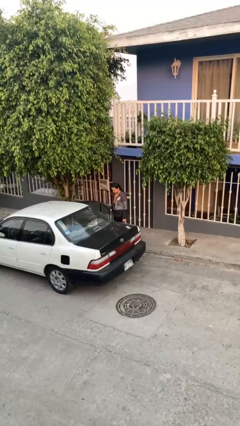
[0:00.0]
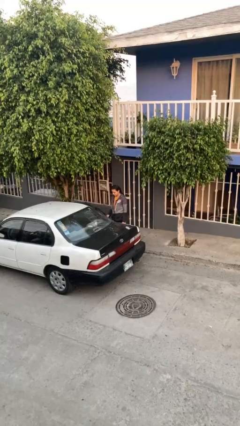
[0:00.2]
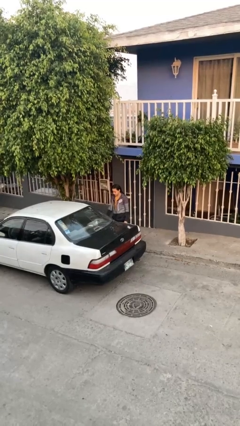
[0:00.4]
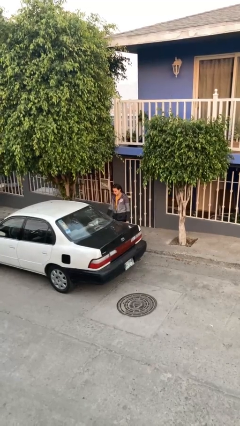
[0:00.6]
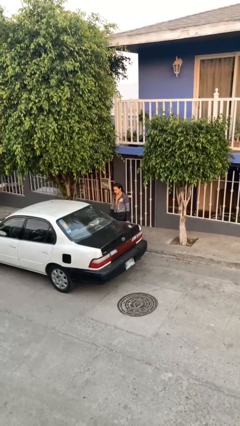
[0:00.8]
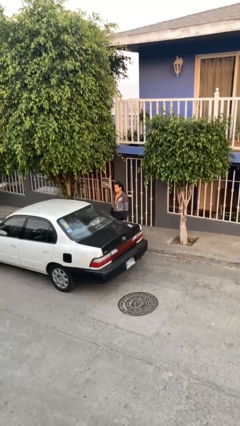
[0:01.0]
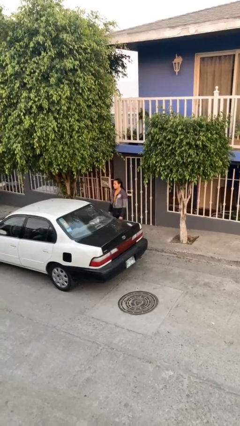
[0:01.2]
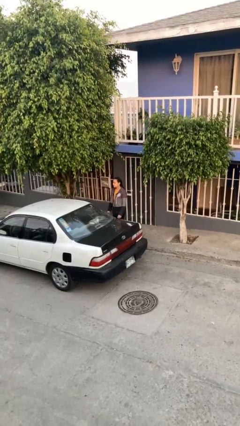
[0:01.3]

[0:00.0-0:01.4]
person closes car door

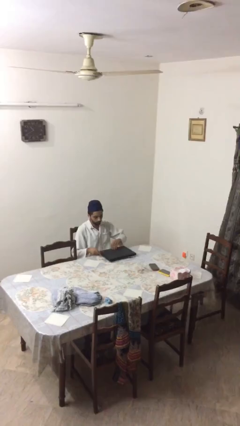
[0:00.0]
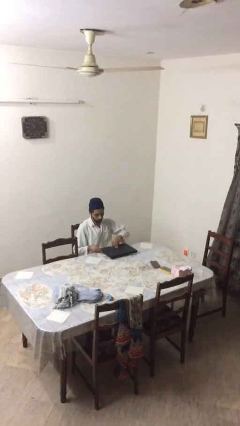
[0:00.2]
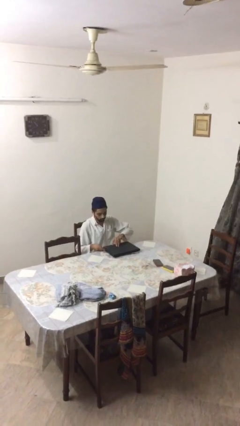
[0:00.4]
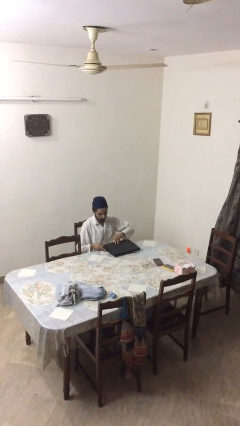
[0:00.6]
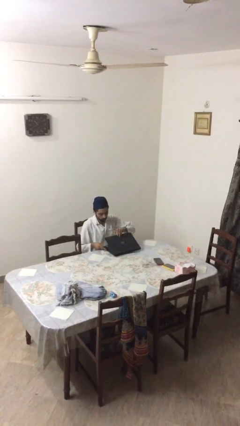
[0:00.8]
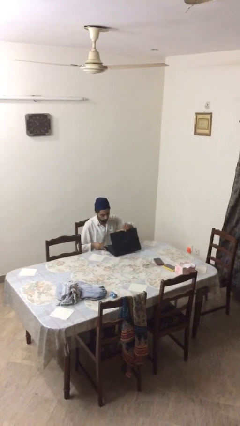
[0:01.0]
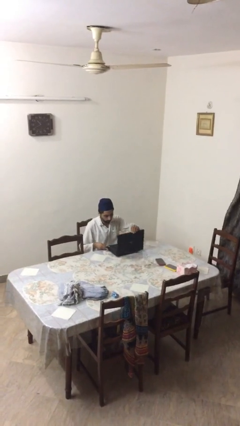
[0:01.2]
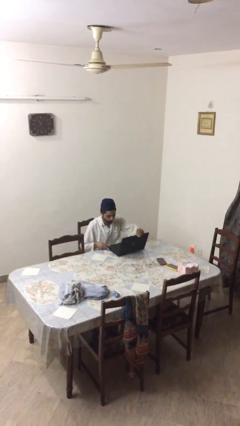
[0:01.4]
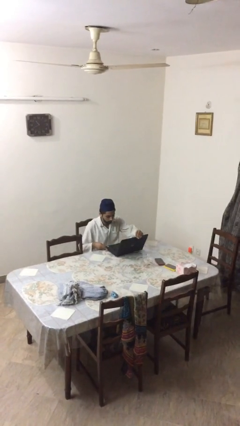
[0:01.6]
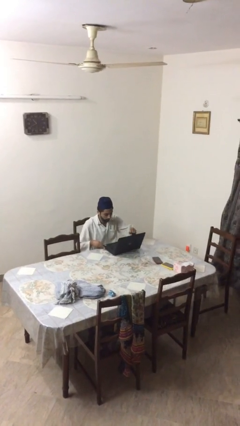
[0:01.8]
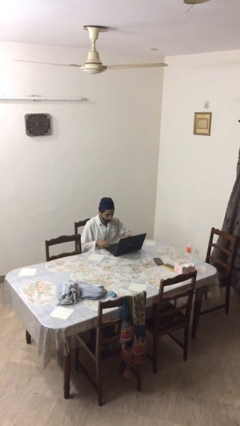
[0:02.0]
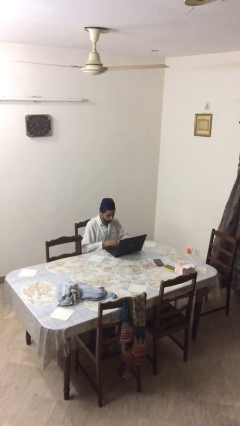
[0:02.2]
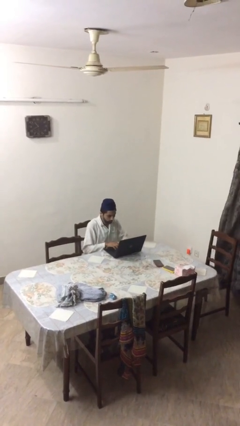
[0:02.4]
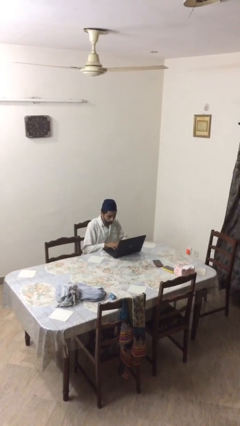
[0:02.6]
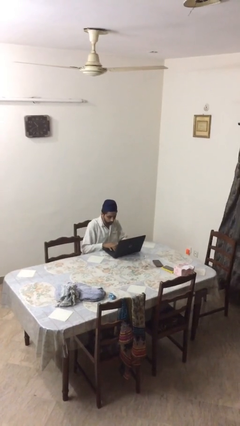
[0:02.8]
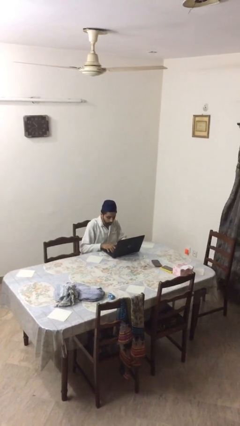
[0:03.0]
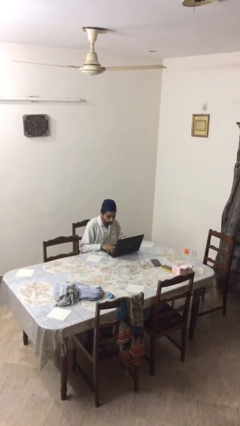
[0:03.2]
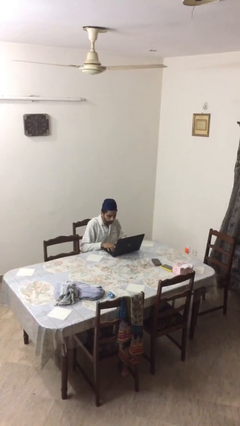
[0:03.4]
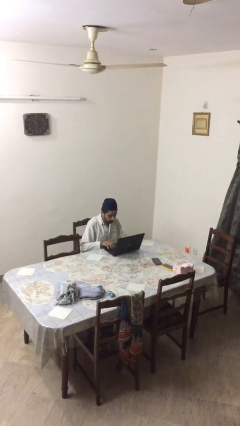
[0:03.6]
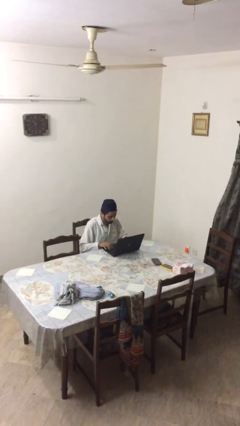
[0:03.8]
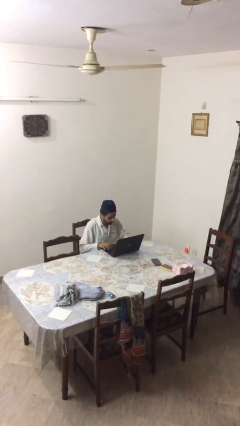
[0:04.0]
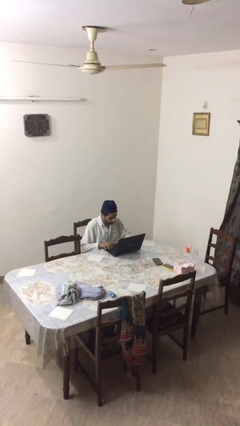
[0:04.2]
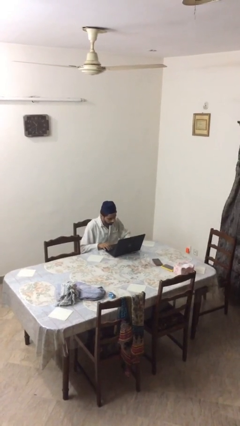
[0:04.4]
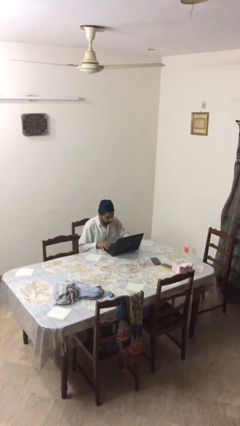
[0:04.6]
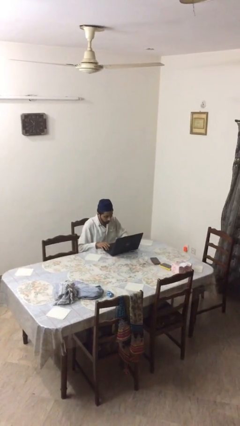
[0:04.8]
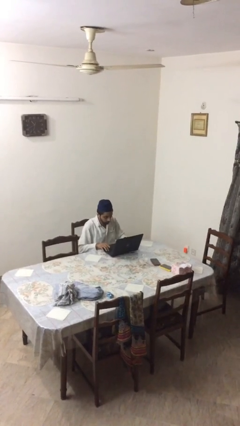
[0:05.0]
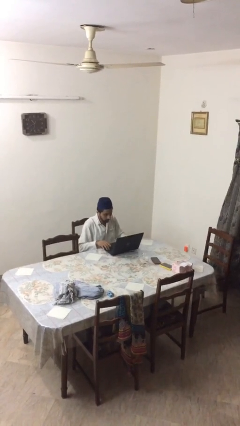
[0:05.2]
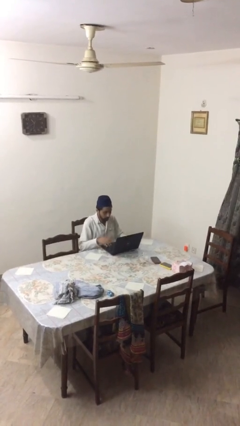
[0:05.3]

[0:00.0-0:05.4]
person interacts with laptop

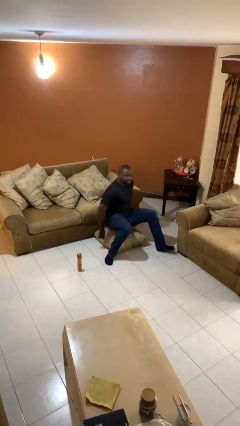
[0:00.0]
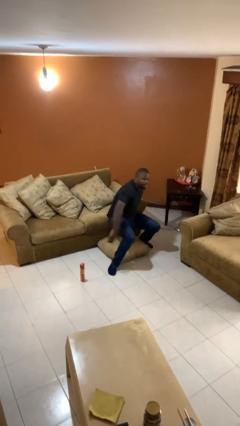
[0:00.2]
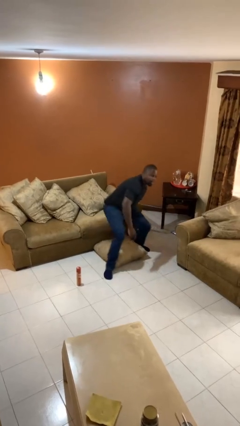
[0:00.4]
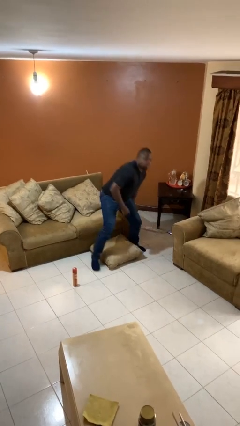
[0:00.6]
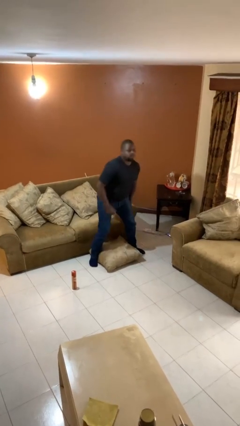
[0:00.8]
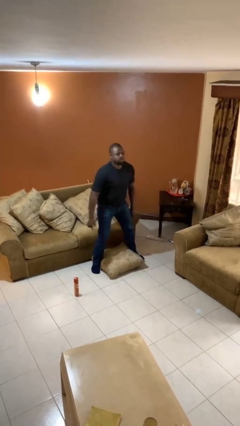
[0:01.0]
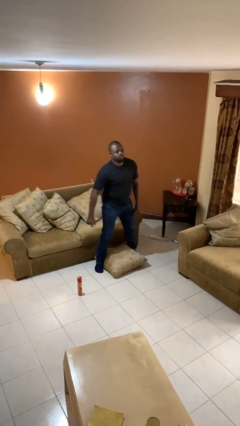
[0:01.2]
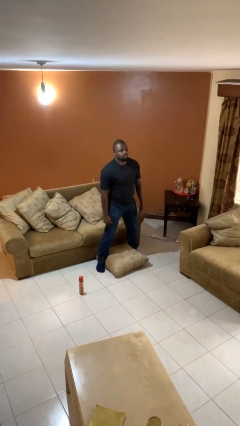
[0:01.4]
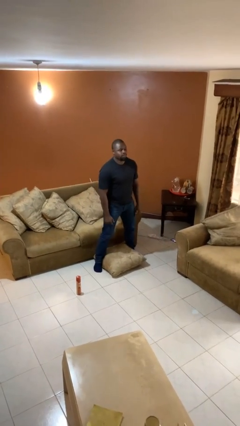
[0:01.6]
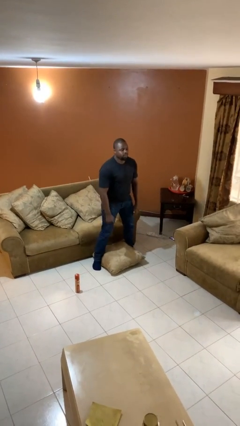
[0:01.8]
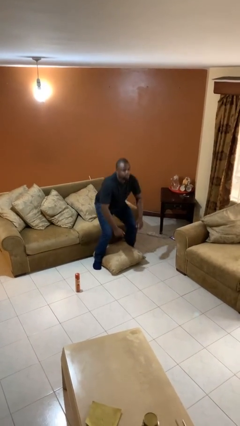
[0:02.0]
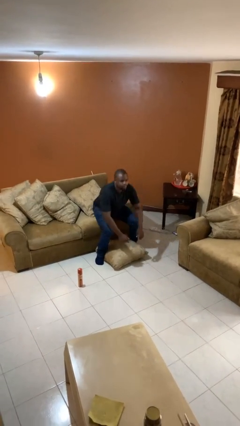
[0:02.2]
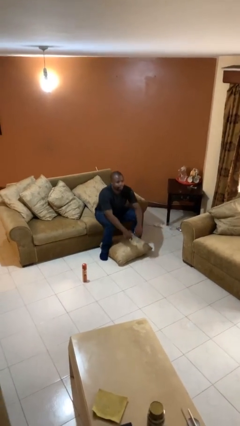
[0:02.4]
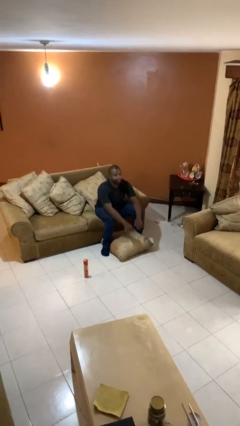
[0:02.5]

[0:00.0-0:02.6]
person stands up from floor

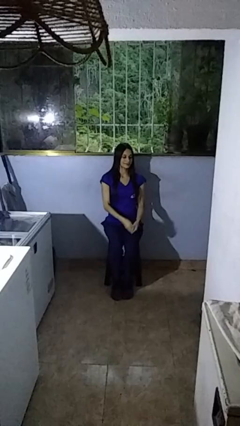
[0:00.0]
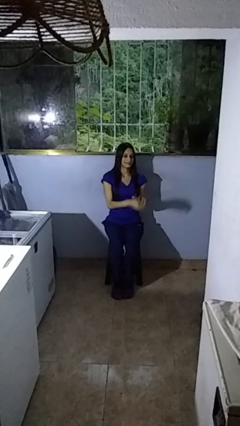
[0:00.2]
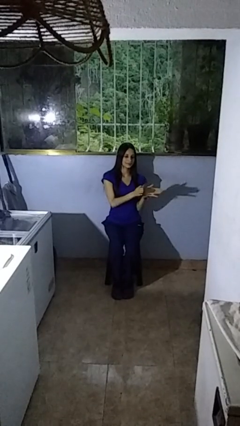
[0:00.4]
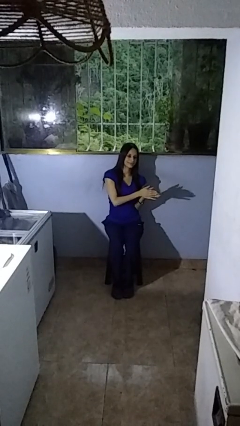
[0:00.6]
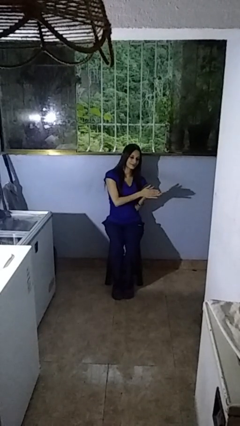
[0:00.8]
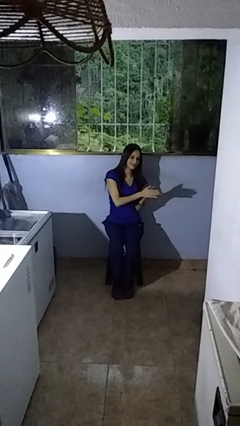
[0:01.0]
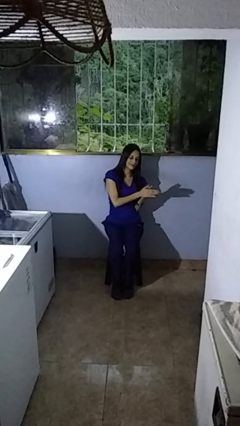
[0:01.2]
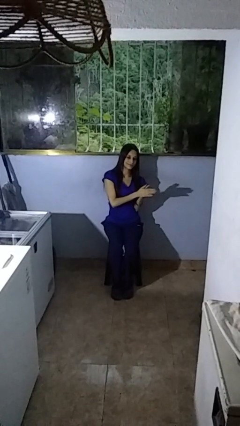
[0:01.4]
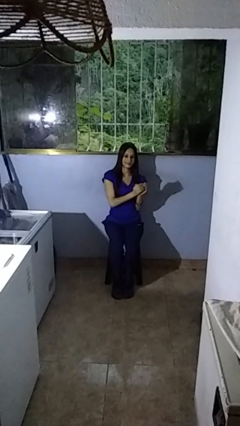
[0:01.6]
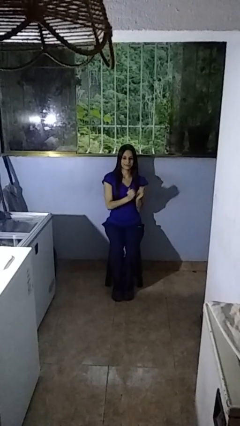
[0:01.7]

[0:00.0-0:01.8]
person claps hands

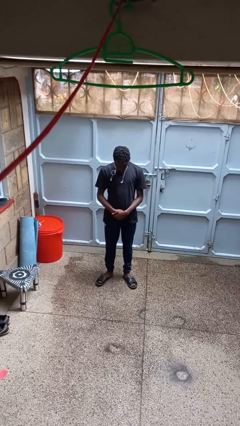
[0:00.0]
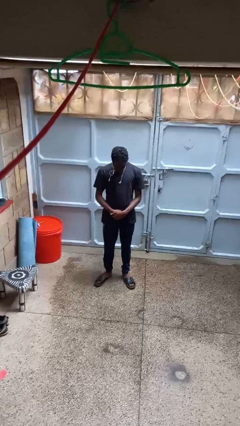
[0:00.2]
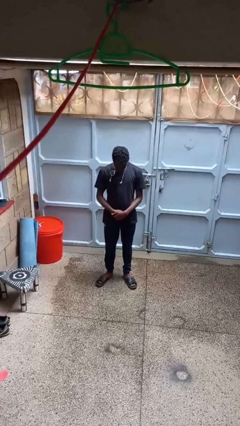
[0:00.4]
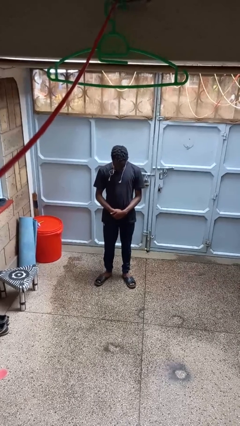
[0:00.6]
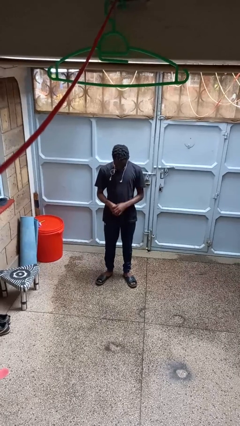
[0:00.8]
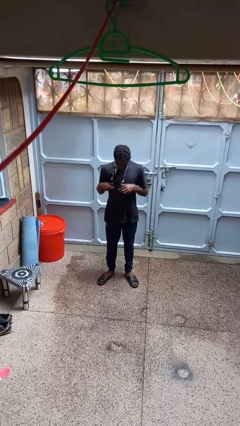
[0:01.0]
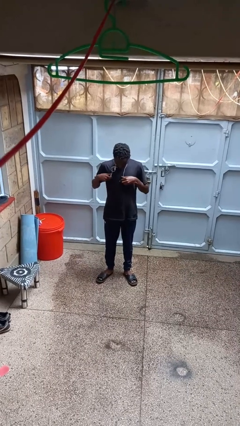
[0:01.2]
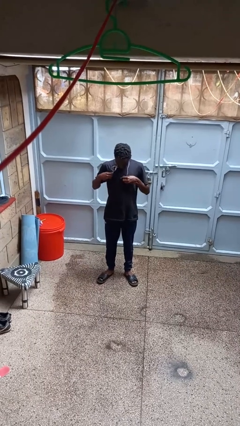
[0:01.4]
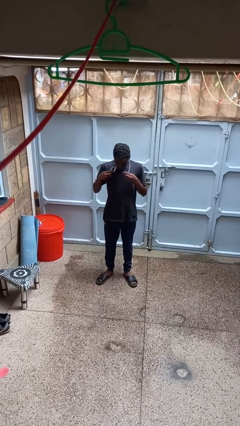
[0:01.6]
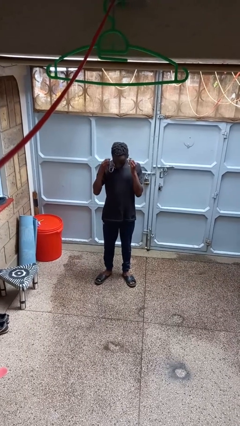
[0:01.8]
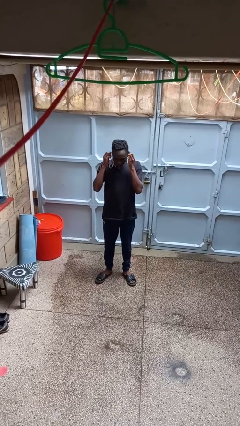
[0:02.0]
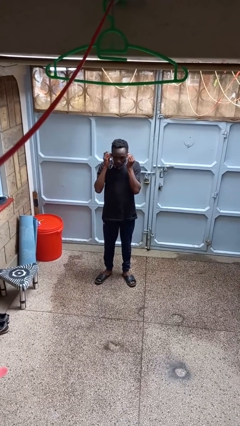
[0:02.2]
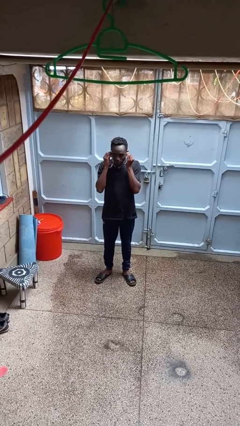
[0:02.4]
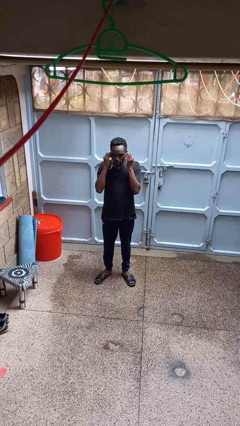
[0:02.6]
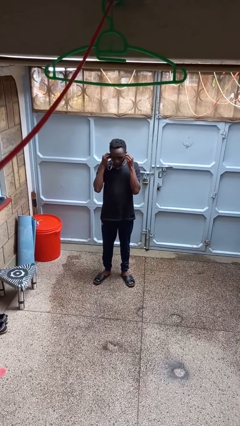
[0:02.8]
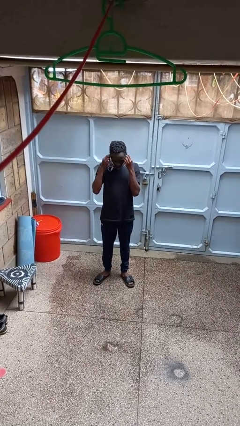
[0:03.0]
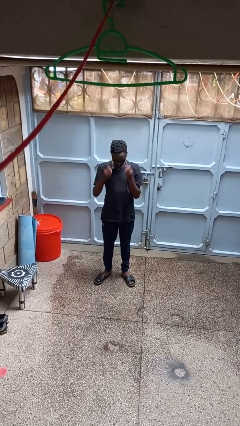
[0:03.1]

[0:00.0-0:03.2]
person puts on headphones

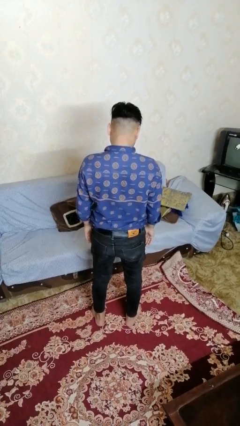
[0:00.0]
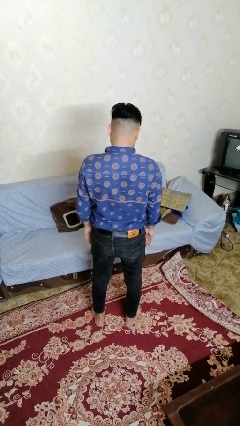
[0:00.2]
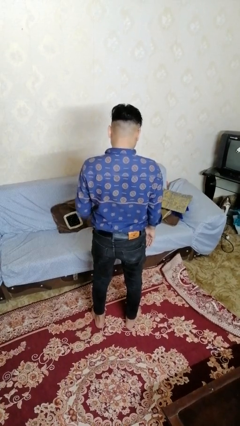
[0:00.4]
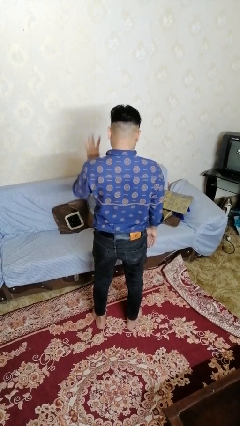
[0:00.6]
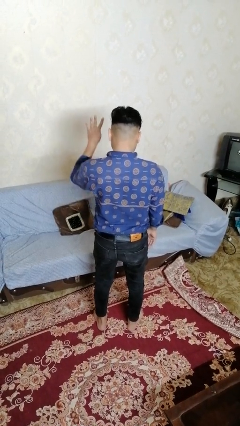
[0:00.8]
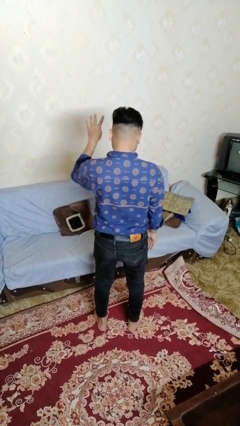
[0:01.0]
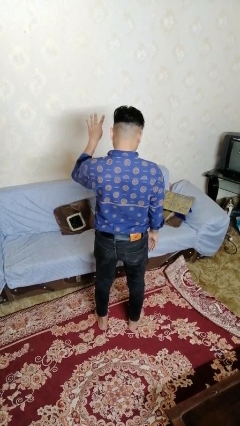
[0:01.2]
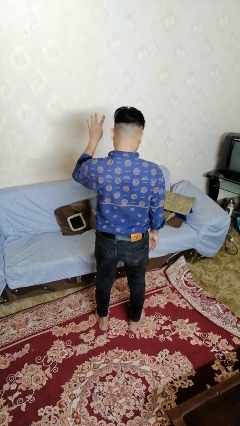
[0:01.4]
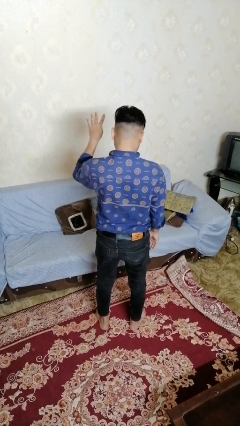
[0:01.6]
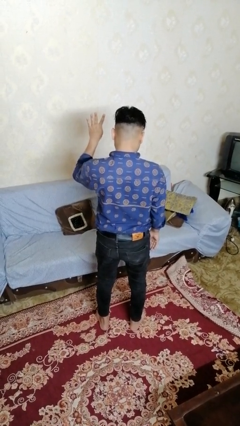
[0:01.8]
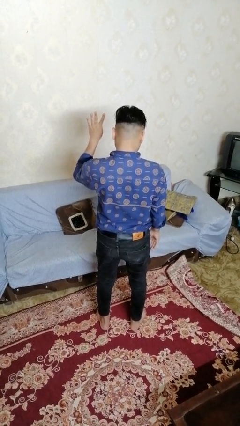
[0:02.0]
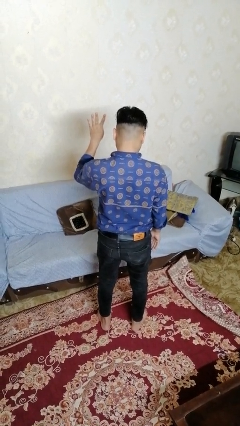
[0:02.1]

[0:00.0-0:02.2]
person gestures number four

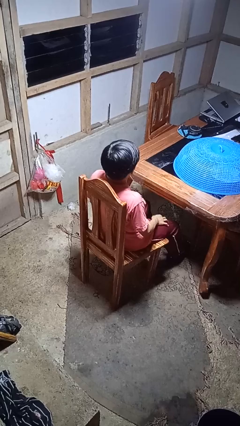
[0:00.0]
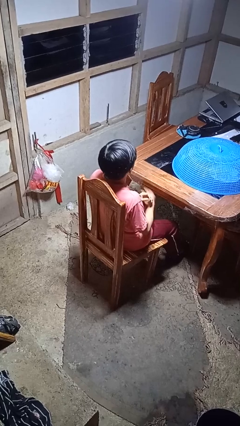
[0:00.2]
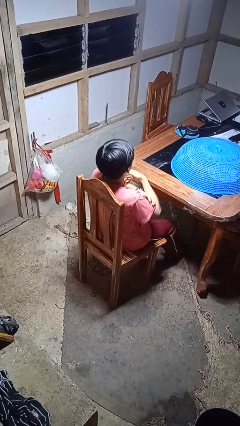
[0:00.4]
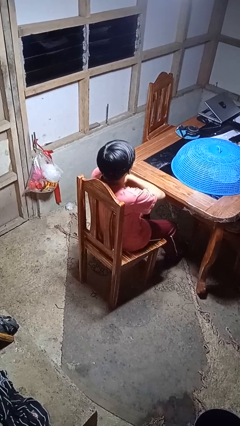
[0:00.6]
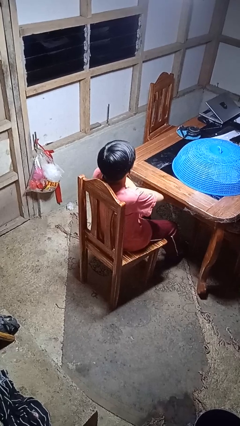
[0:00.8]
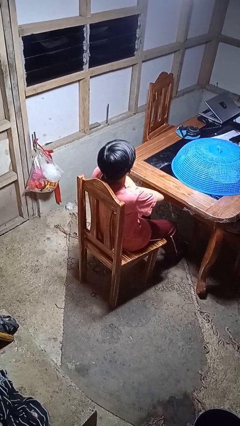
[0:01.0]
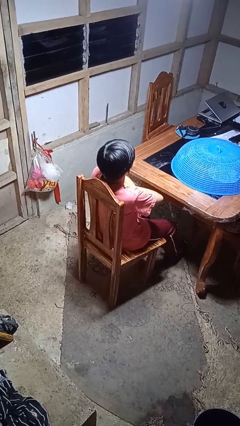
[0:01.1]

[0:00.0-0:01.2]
person crosses arms
